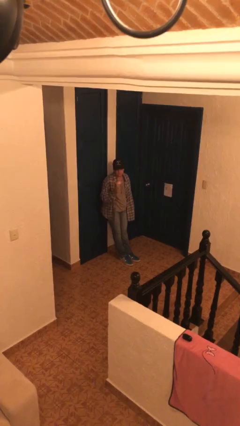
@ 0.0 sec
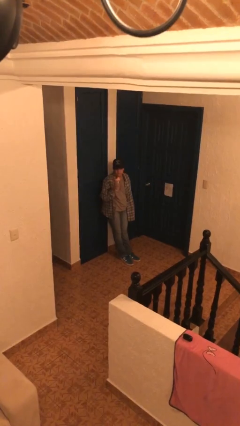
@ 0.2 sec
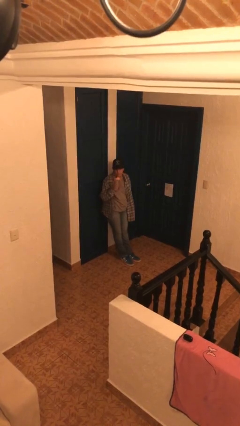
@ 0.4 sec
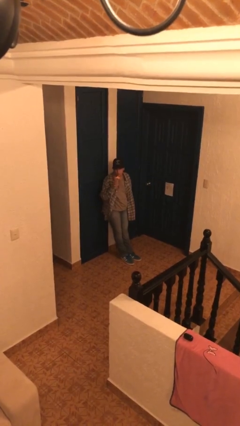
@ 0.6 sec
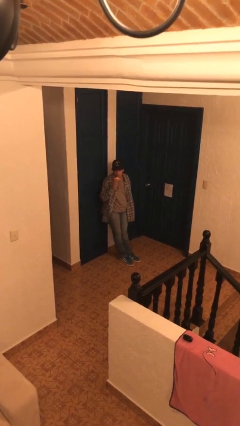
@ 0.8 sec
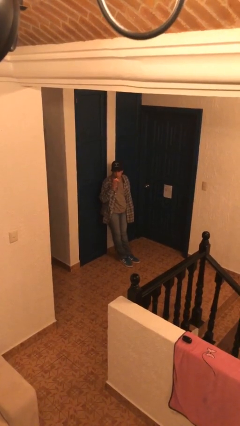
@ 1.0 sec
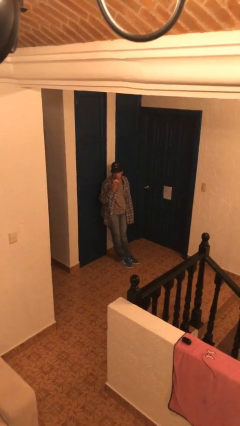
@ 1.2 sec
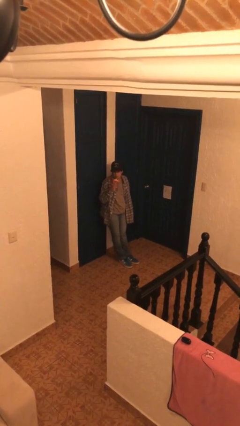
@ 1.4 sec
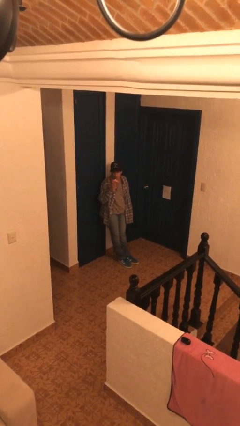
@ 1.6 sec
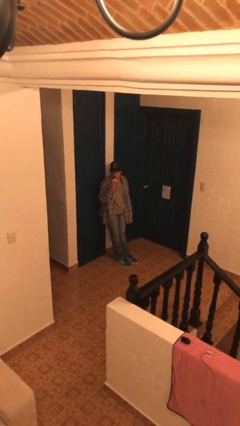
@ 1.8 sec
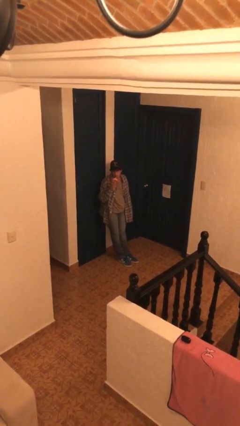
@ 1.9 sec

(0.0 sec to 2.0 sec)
person drinks from straw

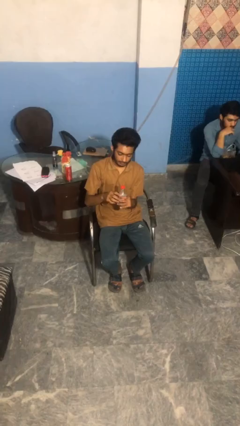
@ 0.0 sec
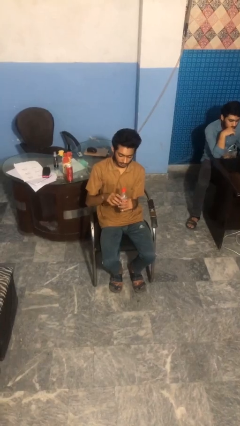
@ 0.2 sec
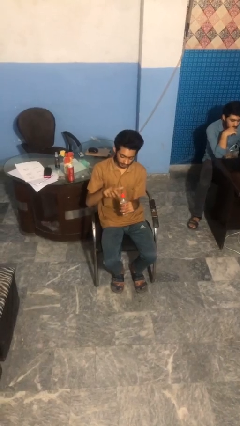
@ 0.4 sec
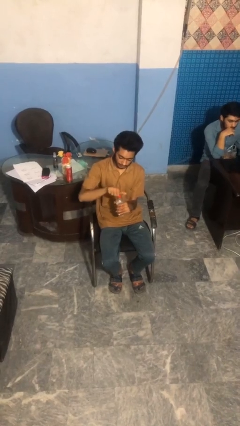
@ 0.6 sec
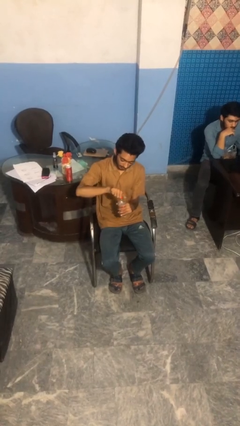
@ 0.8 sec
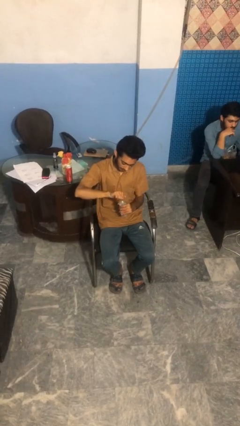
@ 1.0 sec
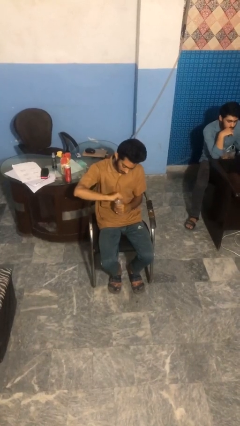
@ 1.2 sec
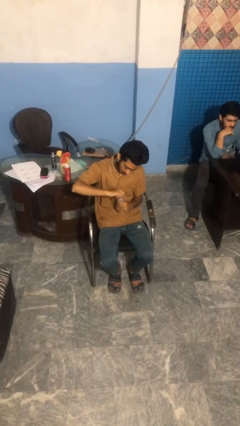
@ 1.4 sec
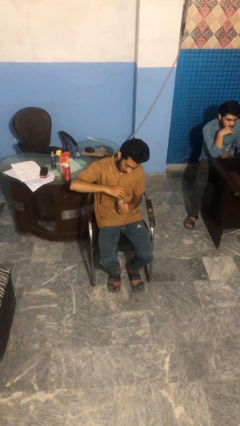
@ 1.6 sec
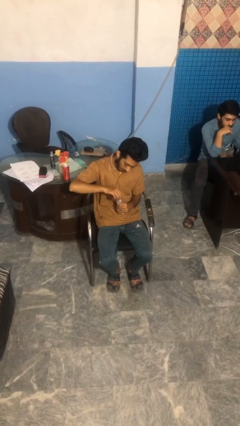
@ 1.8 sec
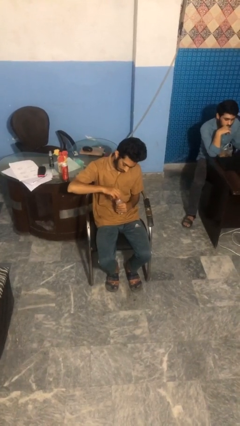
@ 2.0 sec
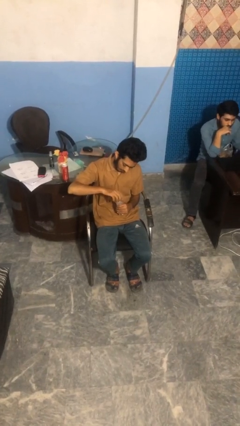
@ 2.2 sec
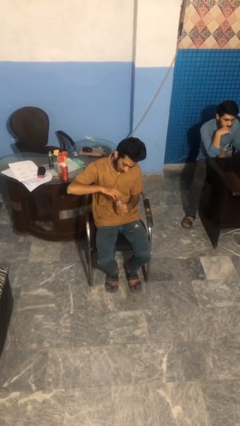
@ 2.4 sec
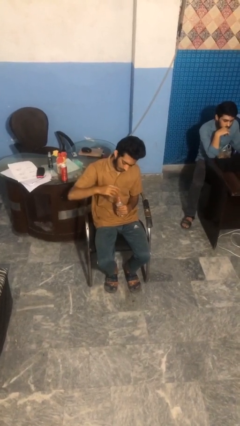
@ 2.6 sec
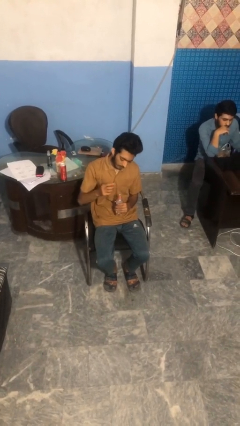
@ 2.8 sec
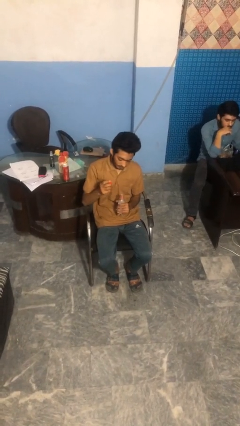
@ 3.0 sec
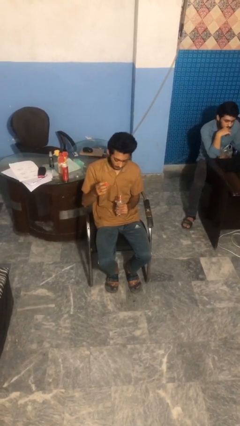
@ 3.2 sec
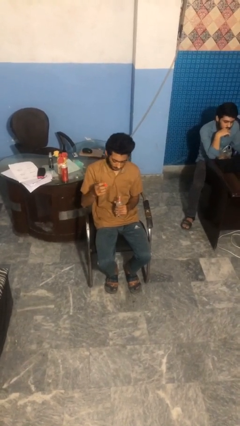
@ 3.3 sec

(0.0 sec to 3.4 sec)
person unscrews lid from bottle

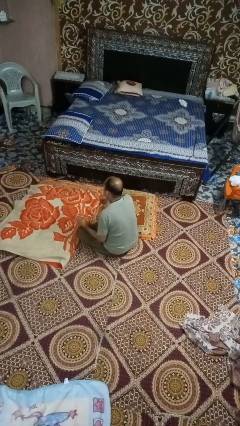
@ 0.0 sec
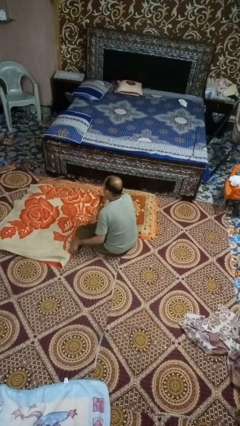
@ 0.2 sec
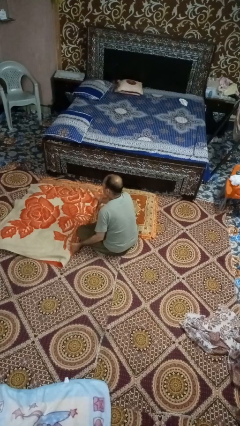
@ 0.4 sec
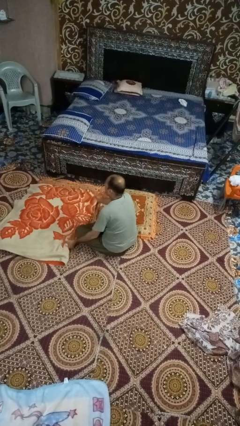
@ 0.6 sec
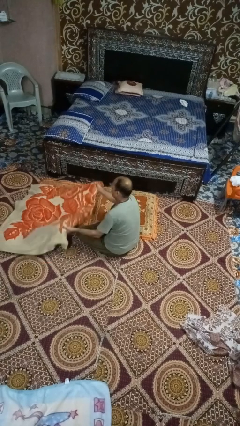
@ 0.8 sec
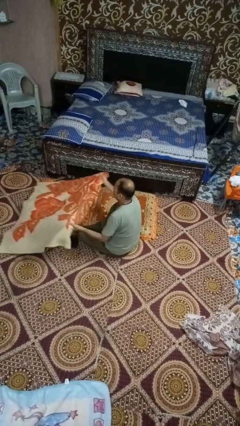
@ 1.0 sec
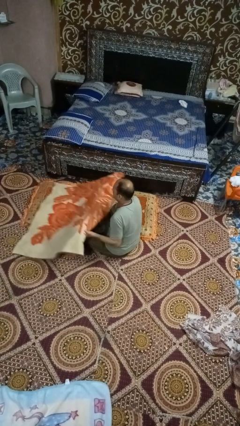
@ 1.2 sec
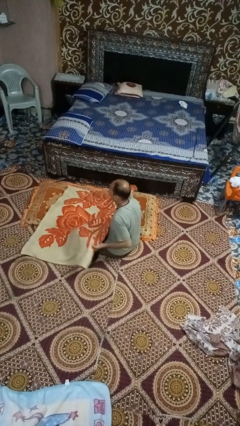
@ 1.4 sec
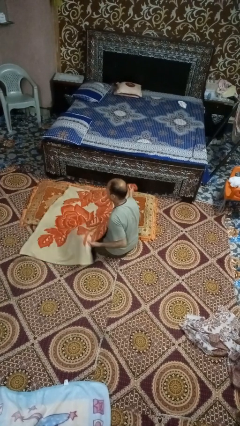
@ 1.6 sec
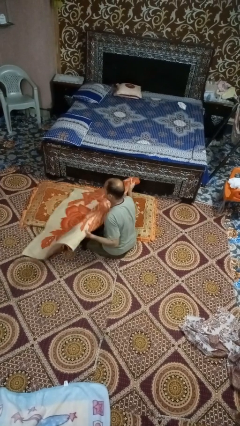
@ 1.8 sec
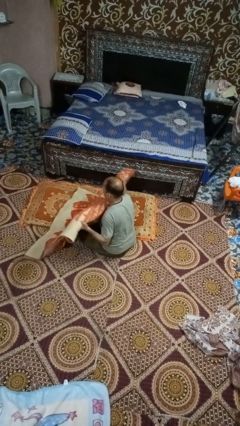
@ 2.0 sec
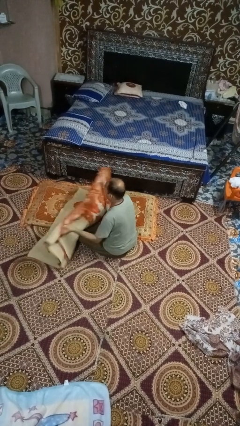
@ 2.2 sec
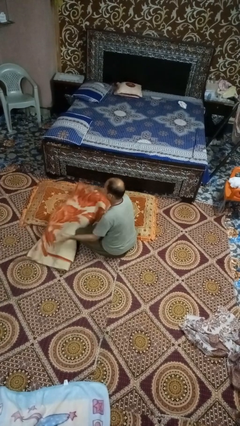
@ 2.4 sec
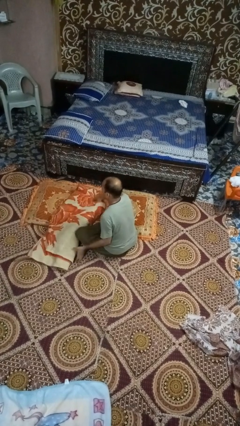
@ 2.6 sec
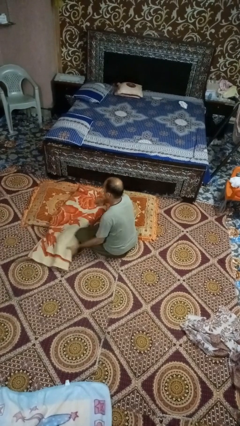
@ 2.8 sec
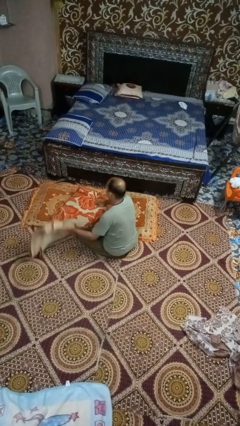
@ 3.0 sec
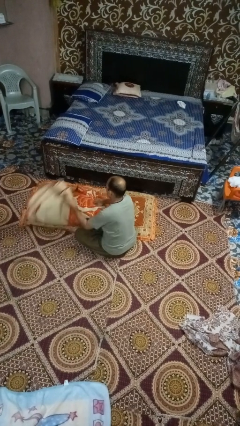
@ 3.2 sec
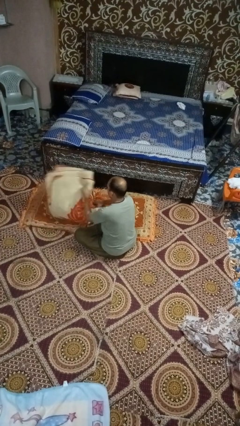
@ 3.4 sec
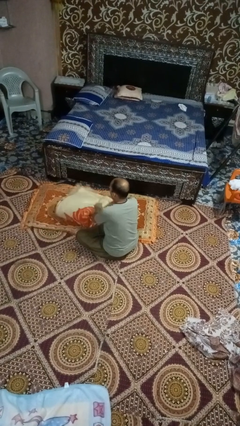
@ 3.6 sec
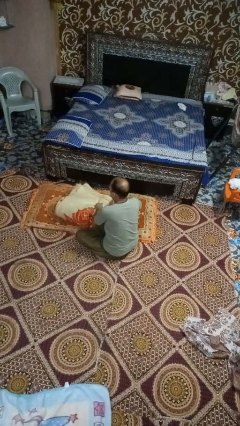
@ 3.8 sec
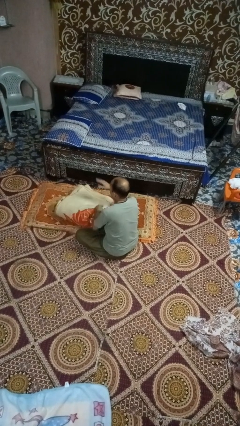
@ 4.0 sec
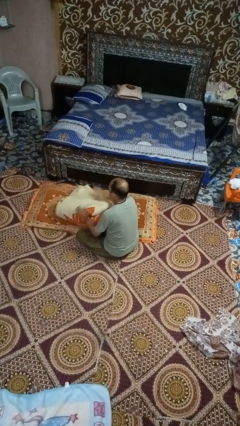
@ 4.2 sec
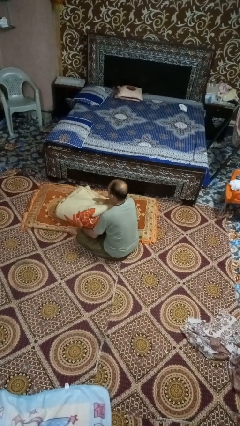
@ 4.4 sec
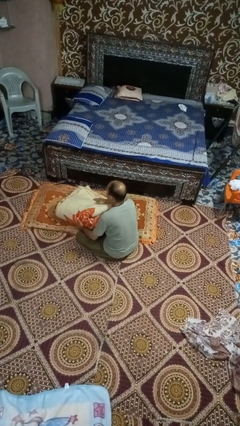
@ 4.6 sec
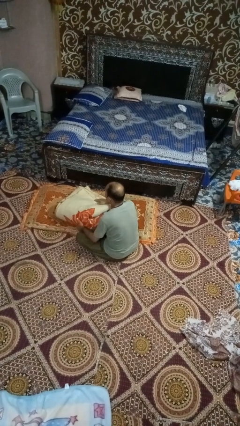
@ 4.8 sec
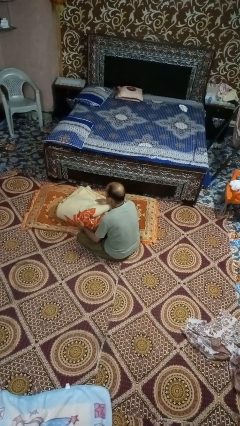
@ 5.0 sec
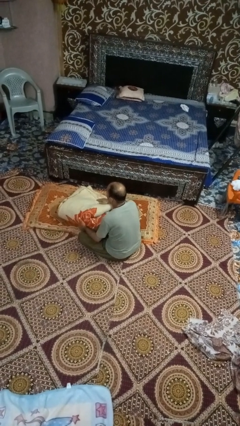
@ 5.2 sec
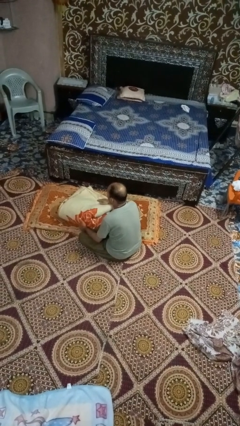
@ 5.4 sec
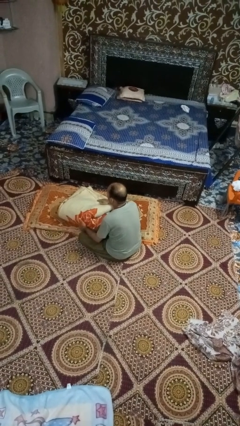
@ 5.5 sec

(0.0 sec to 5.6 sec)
person folds blanket

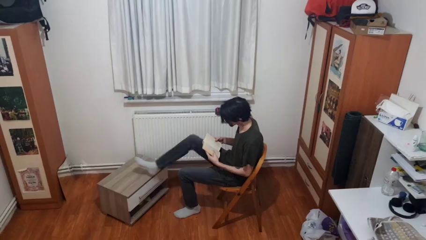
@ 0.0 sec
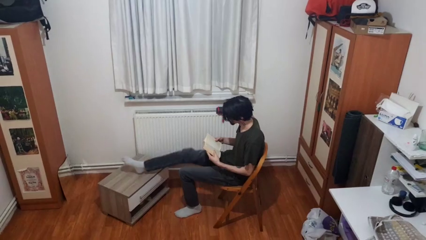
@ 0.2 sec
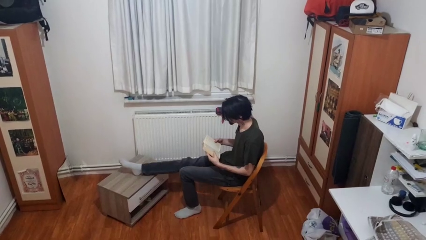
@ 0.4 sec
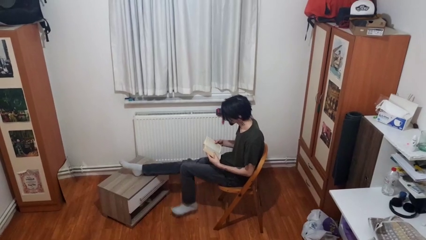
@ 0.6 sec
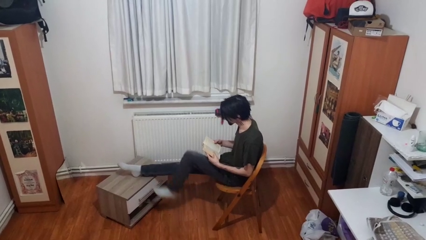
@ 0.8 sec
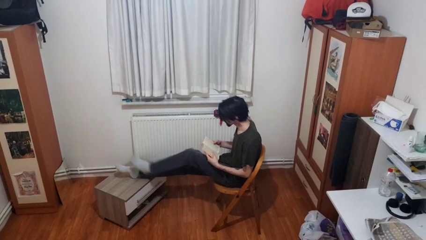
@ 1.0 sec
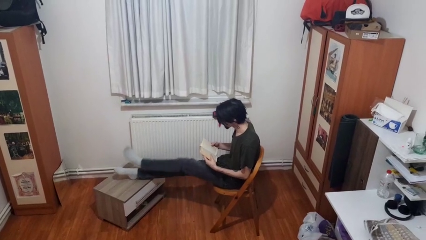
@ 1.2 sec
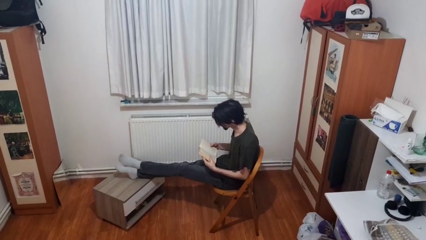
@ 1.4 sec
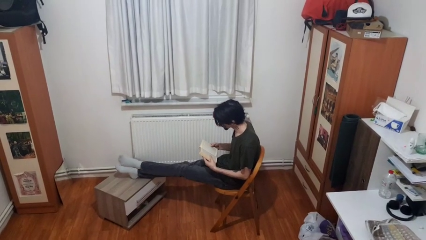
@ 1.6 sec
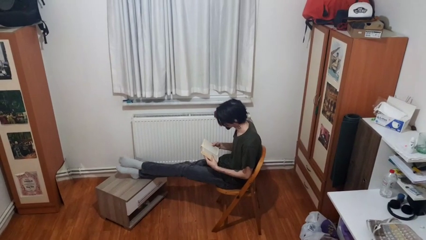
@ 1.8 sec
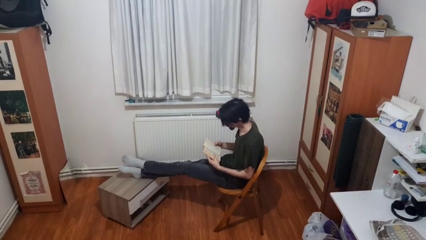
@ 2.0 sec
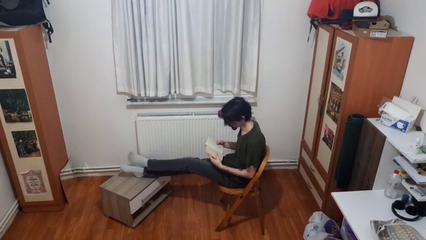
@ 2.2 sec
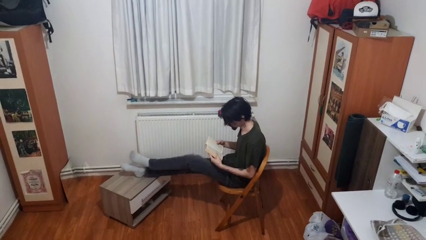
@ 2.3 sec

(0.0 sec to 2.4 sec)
person puts feet up

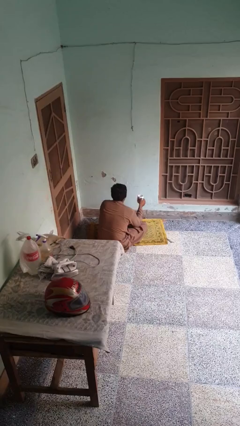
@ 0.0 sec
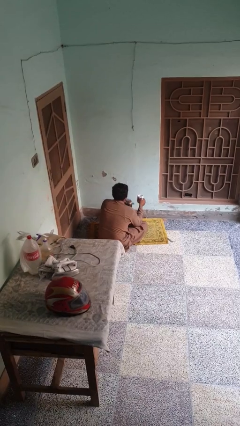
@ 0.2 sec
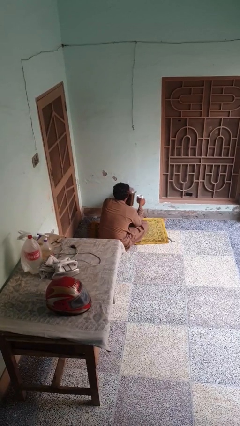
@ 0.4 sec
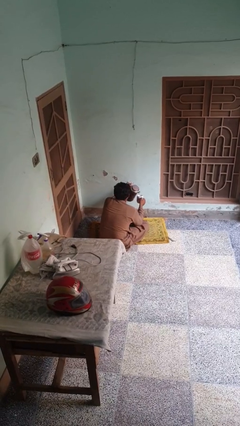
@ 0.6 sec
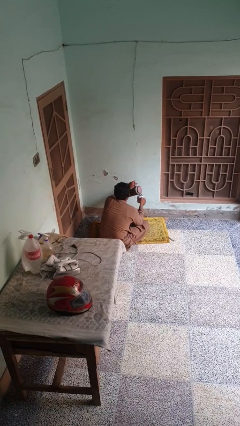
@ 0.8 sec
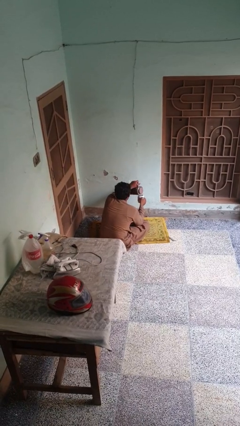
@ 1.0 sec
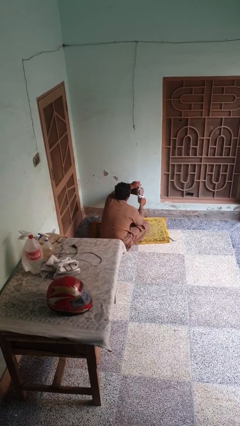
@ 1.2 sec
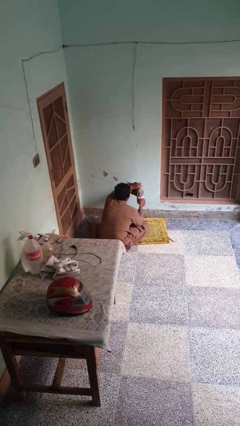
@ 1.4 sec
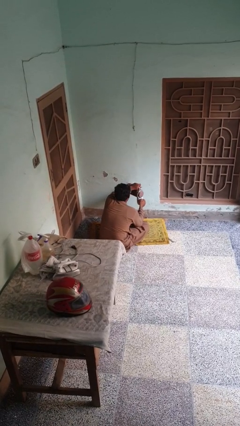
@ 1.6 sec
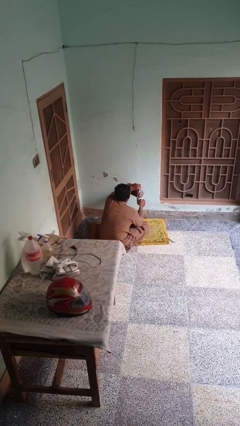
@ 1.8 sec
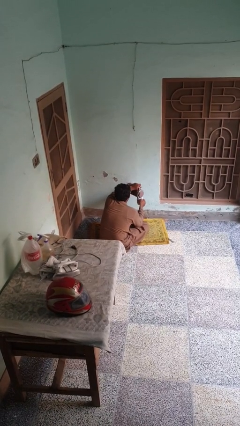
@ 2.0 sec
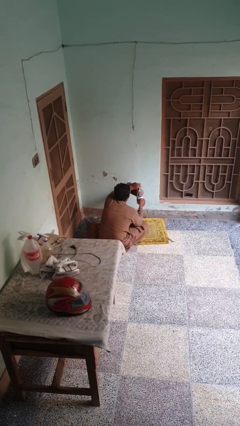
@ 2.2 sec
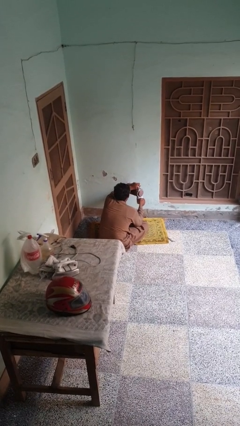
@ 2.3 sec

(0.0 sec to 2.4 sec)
person pours coffee into mug

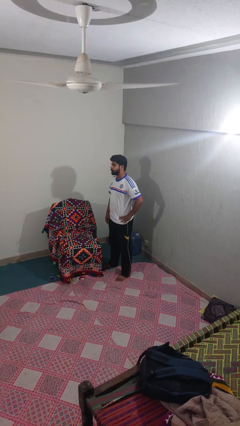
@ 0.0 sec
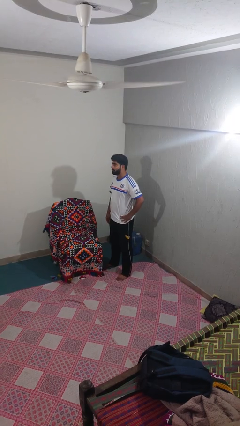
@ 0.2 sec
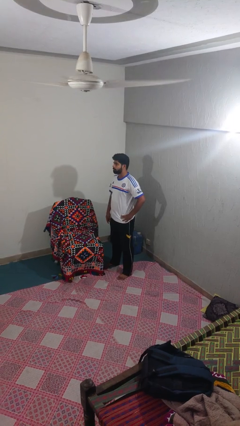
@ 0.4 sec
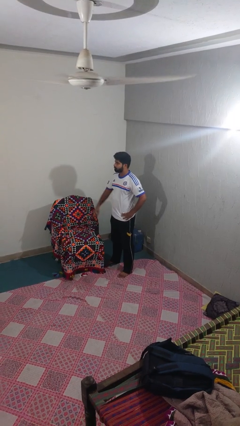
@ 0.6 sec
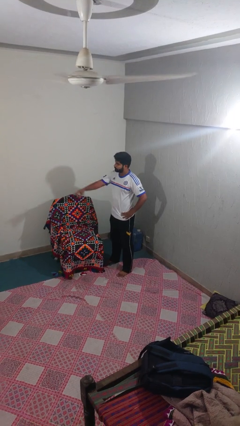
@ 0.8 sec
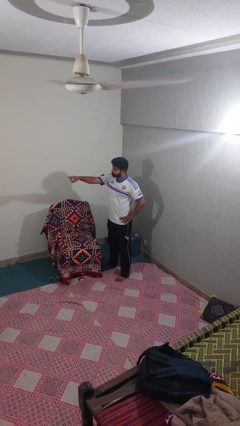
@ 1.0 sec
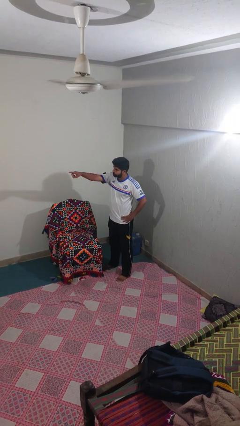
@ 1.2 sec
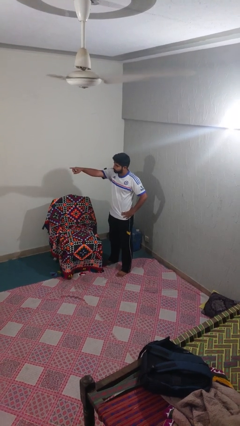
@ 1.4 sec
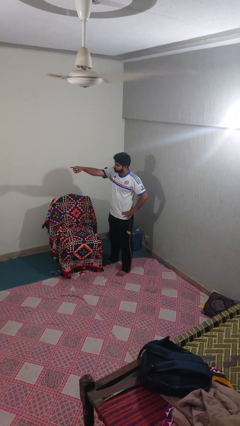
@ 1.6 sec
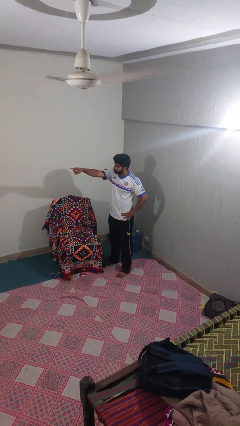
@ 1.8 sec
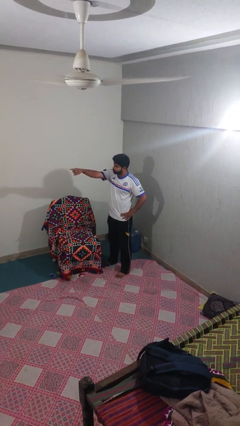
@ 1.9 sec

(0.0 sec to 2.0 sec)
person points at person
